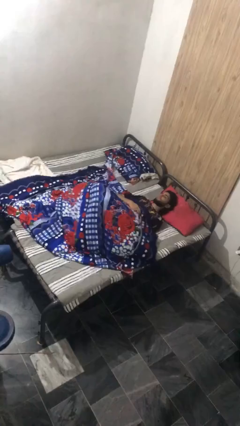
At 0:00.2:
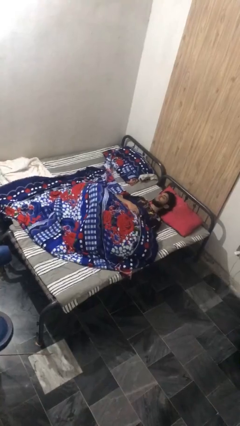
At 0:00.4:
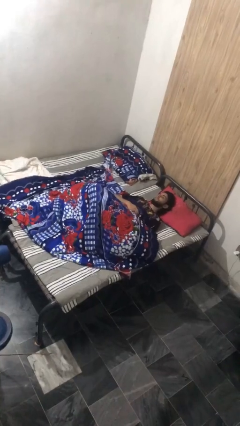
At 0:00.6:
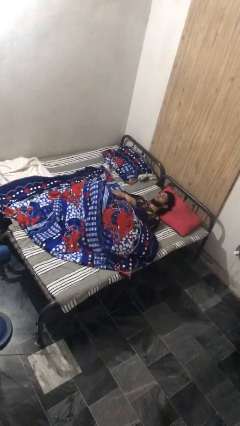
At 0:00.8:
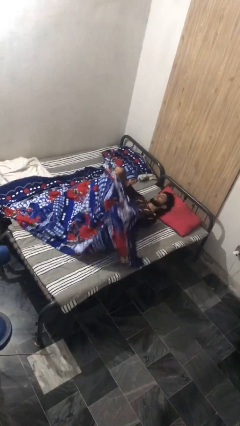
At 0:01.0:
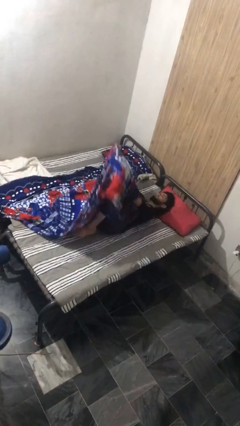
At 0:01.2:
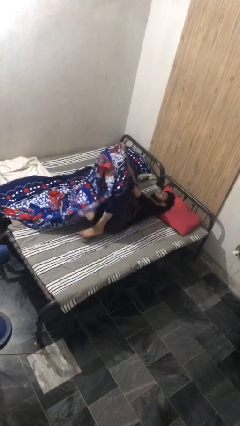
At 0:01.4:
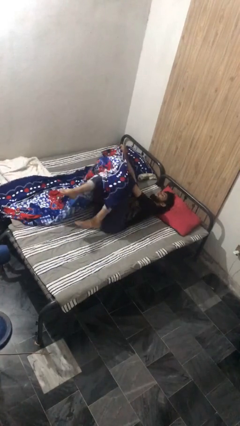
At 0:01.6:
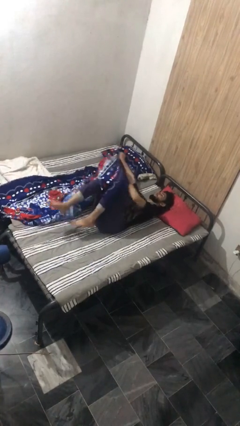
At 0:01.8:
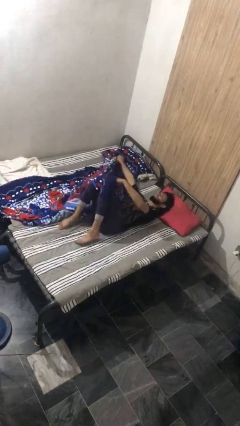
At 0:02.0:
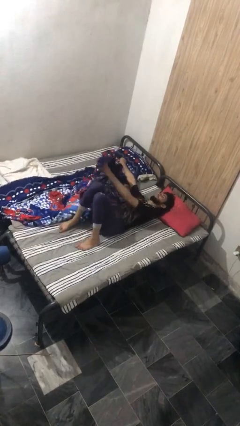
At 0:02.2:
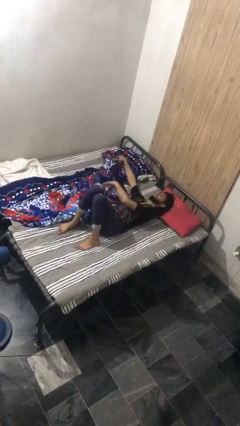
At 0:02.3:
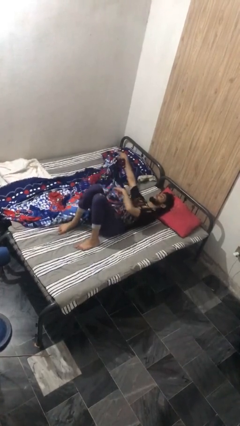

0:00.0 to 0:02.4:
person uncovers with bedsheets

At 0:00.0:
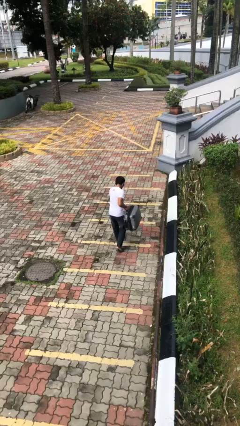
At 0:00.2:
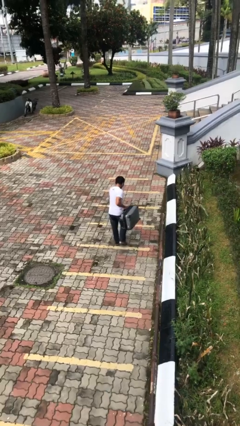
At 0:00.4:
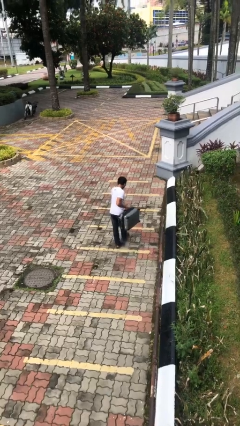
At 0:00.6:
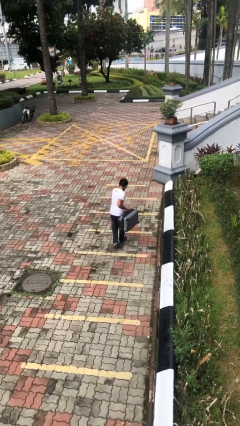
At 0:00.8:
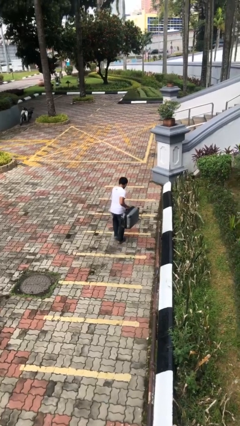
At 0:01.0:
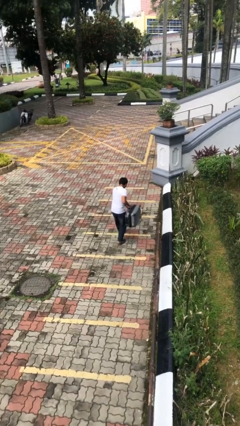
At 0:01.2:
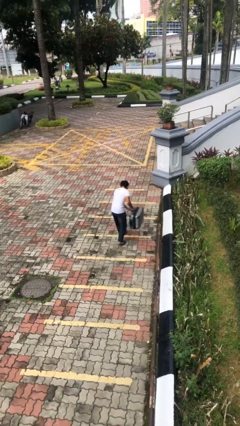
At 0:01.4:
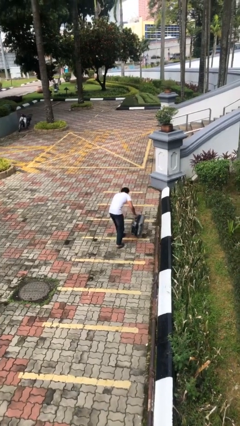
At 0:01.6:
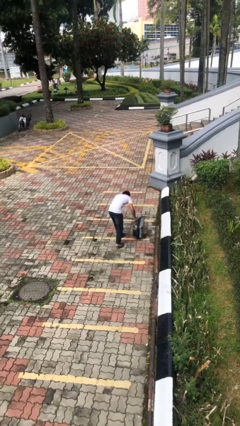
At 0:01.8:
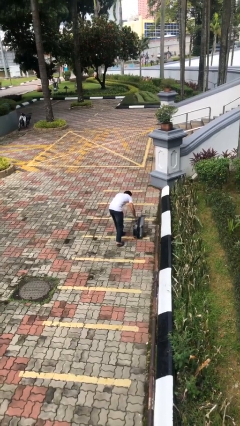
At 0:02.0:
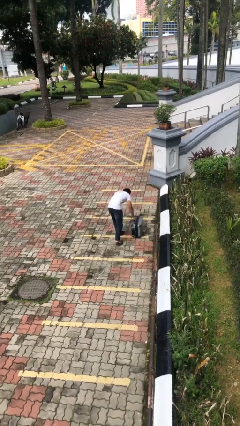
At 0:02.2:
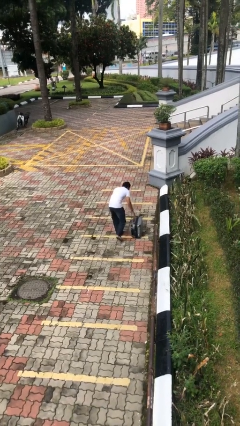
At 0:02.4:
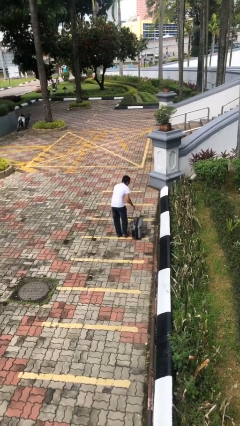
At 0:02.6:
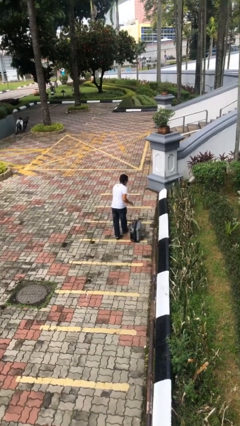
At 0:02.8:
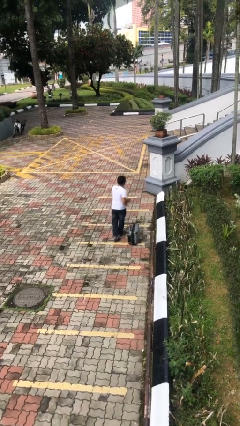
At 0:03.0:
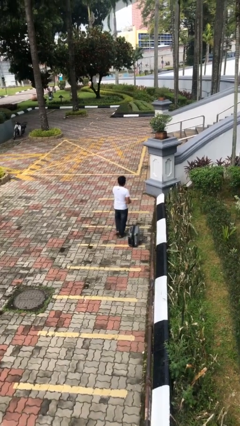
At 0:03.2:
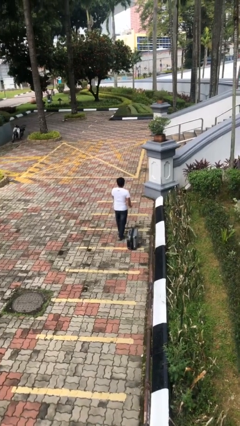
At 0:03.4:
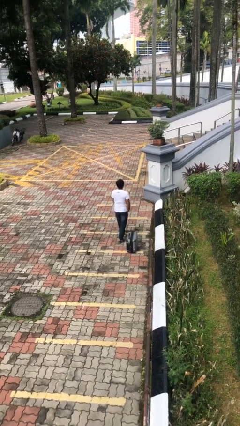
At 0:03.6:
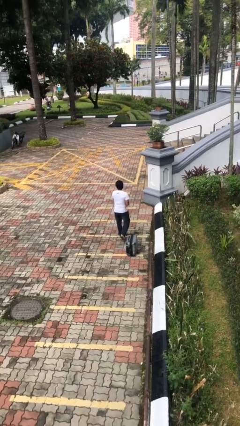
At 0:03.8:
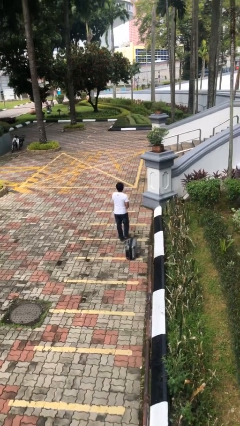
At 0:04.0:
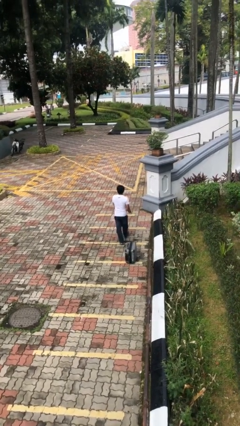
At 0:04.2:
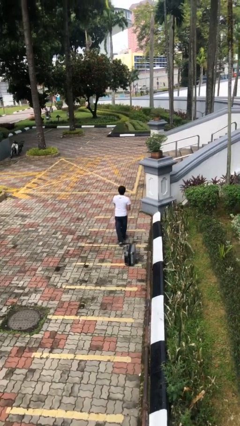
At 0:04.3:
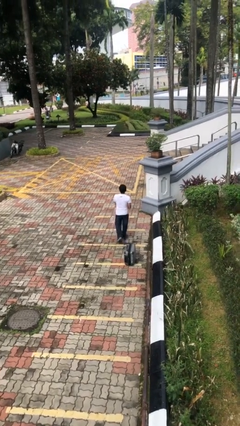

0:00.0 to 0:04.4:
person puts down object on floor

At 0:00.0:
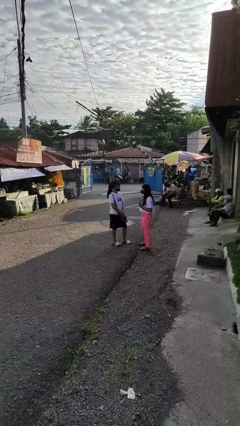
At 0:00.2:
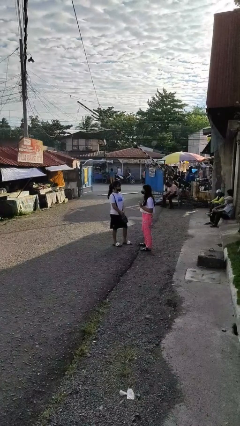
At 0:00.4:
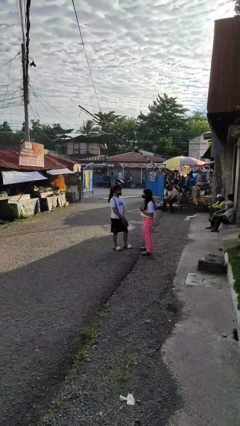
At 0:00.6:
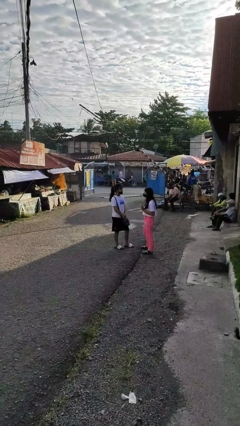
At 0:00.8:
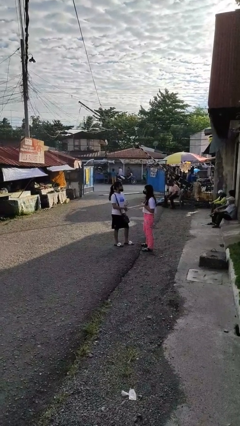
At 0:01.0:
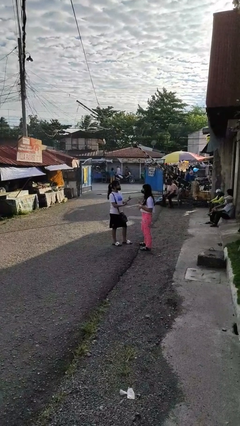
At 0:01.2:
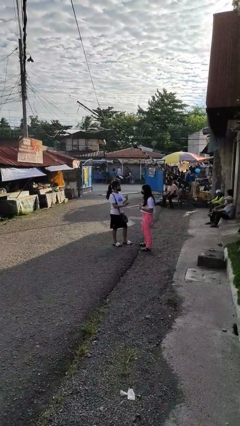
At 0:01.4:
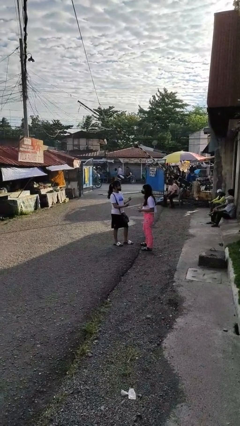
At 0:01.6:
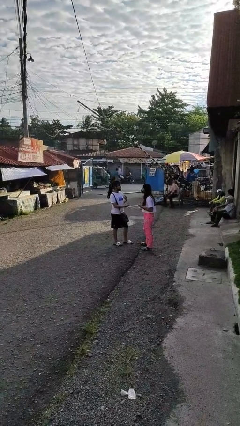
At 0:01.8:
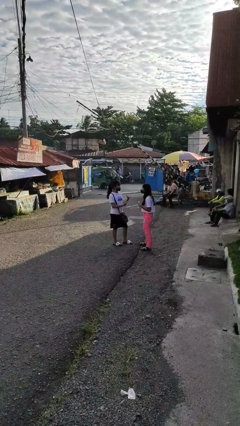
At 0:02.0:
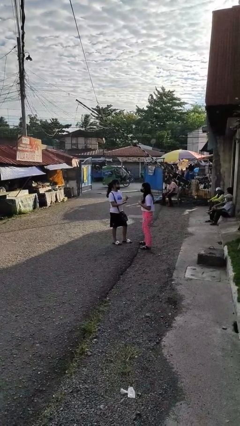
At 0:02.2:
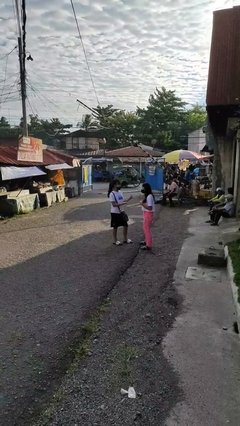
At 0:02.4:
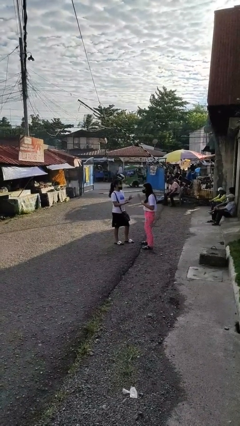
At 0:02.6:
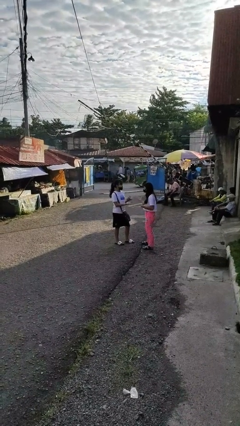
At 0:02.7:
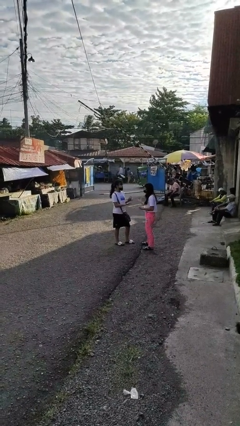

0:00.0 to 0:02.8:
person talks to person

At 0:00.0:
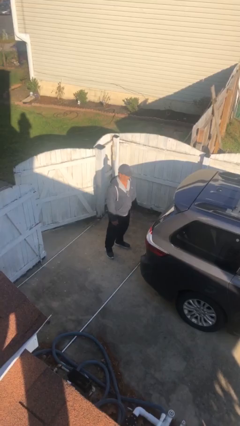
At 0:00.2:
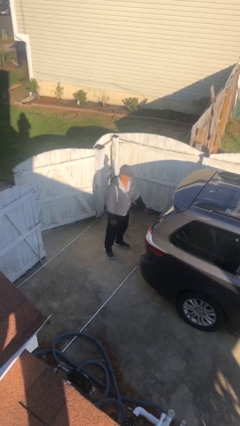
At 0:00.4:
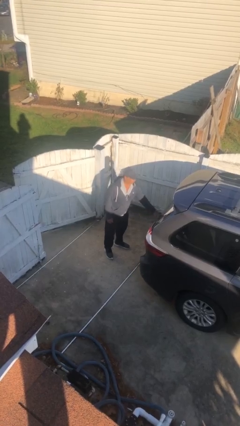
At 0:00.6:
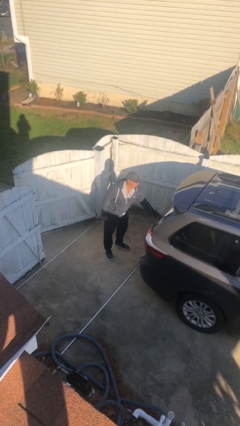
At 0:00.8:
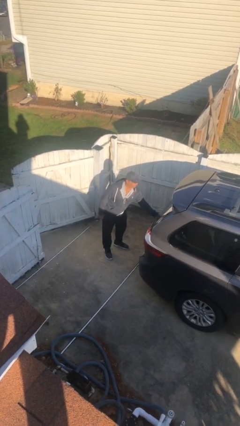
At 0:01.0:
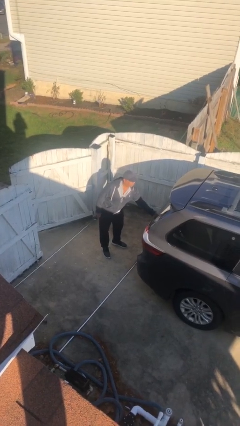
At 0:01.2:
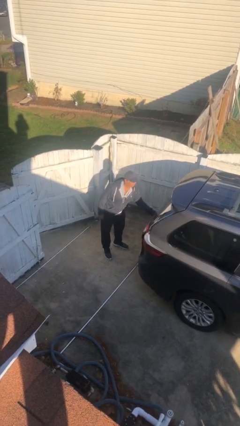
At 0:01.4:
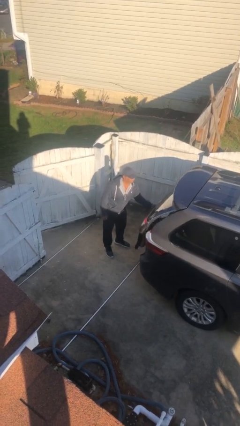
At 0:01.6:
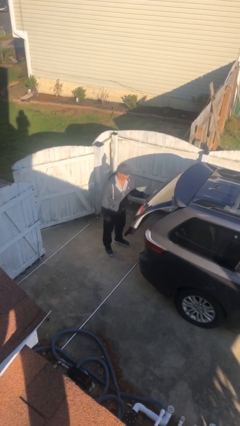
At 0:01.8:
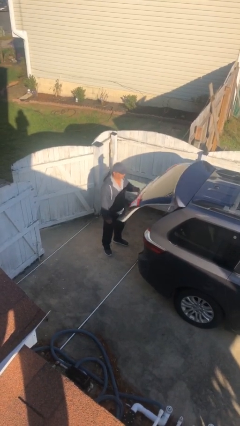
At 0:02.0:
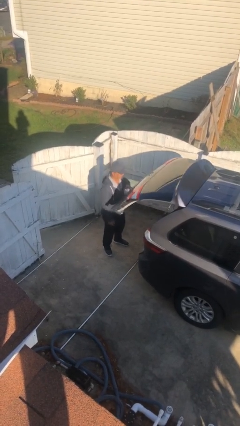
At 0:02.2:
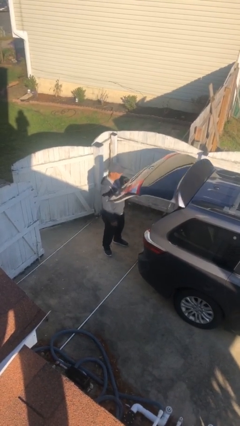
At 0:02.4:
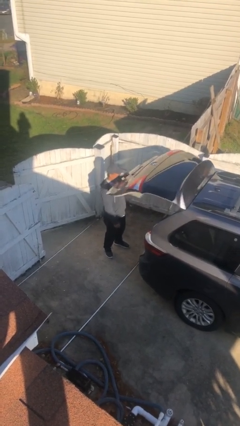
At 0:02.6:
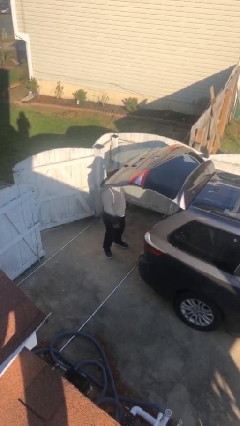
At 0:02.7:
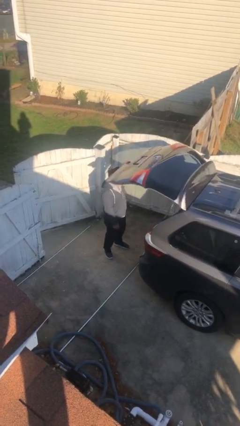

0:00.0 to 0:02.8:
person opens car trunk

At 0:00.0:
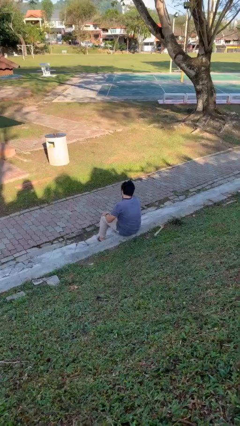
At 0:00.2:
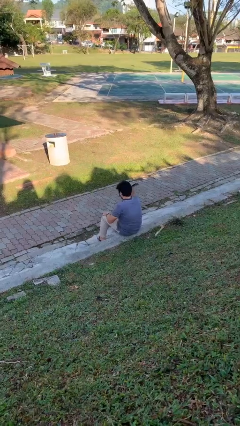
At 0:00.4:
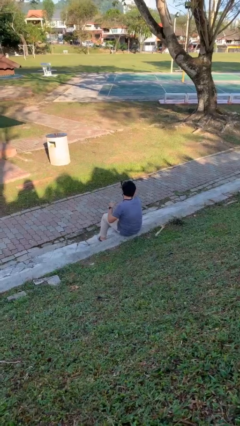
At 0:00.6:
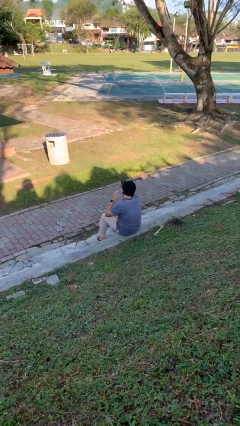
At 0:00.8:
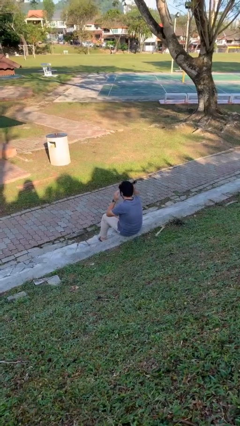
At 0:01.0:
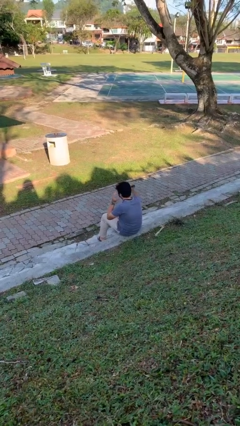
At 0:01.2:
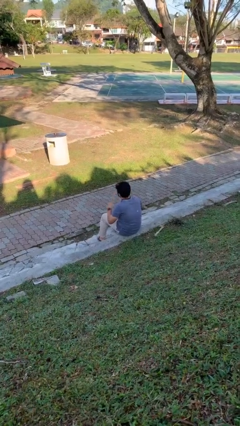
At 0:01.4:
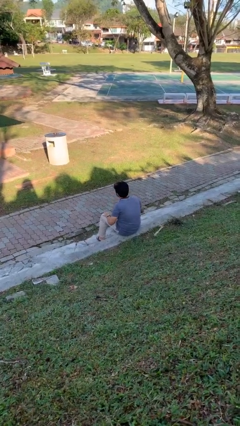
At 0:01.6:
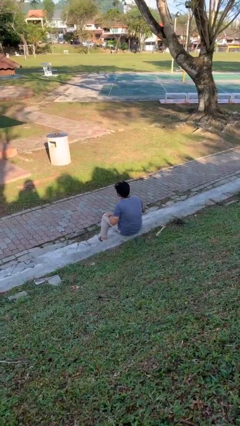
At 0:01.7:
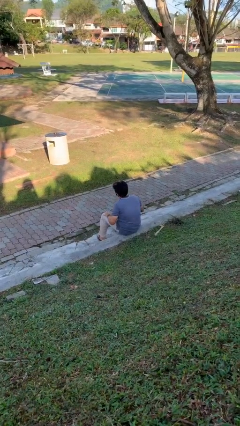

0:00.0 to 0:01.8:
person brushes hair

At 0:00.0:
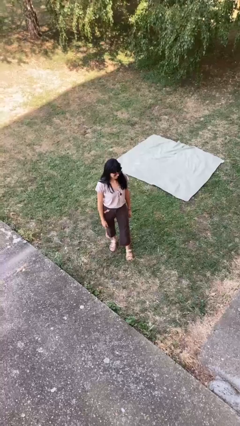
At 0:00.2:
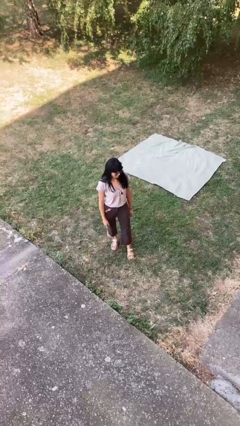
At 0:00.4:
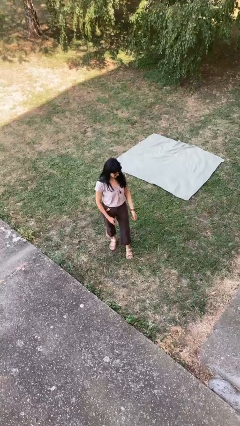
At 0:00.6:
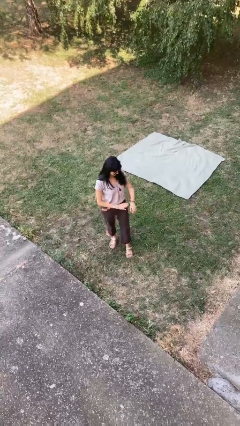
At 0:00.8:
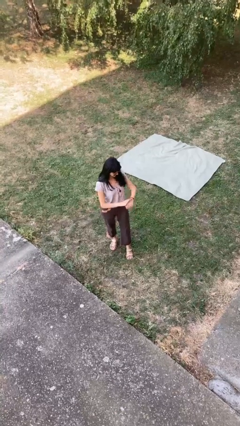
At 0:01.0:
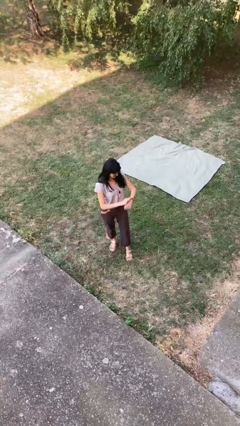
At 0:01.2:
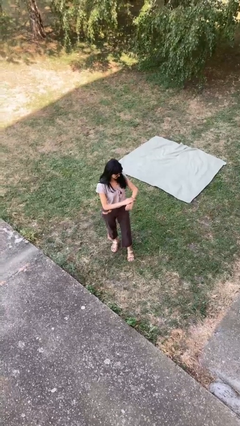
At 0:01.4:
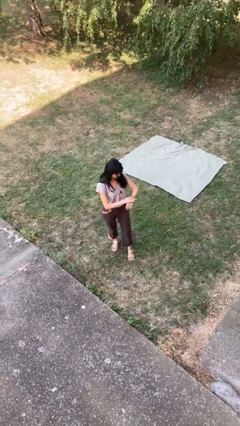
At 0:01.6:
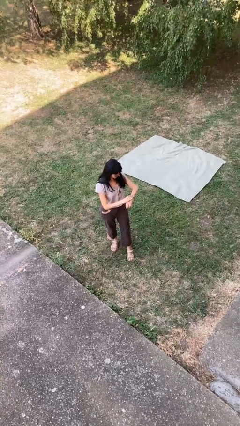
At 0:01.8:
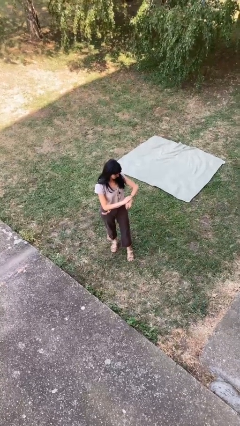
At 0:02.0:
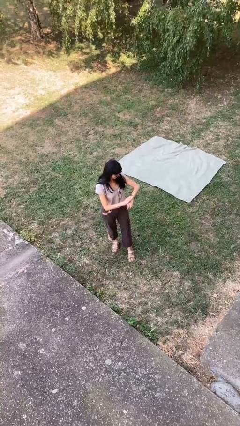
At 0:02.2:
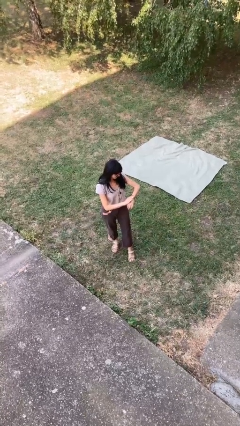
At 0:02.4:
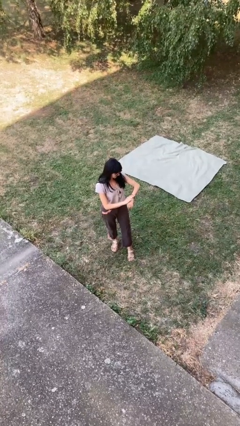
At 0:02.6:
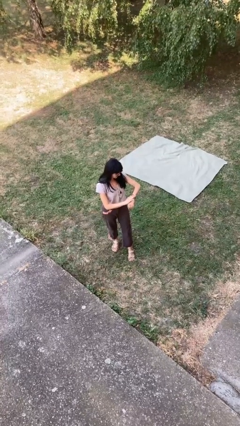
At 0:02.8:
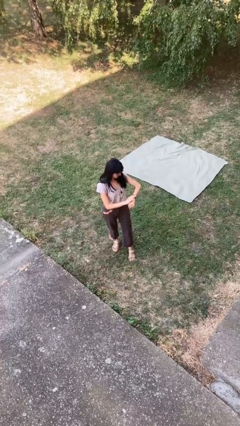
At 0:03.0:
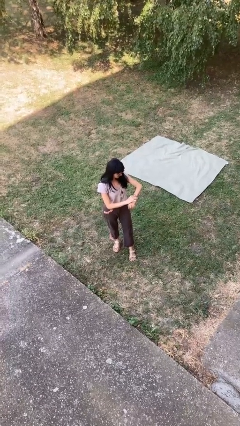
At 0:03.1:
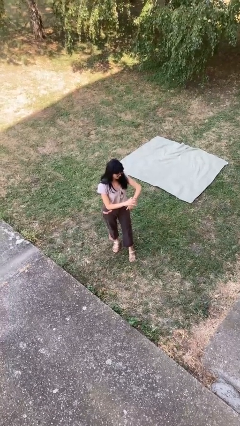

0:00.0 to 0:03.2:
person looks at wristwatch
